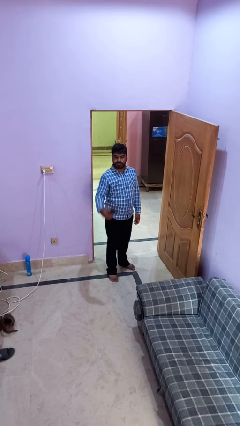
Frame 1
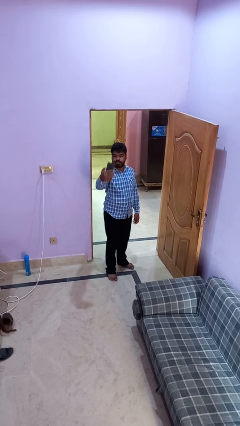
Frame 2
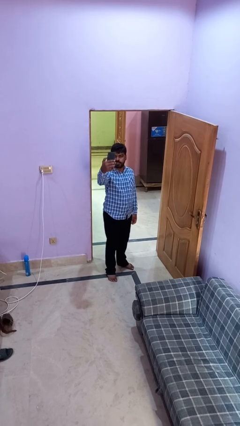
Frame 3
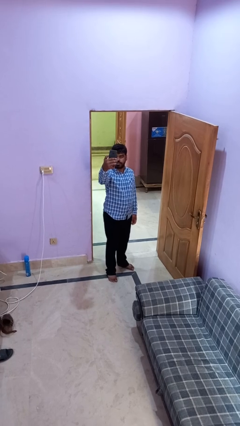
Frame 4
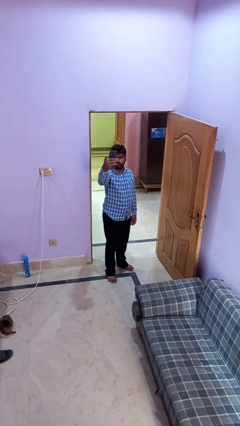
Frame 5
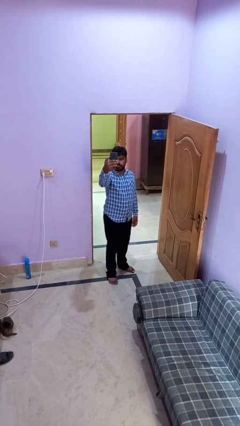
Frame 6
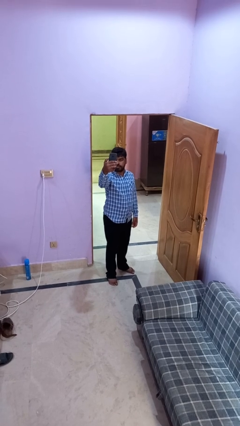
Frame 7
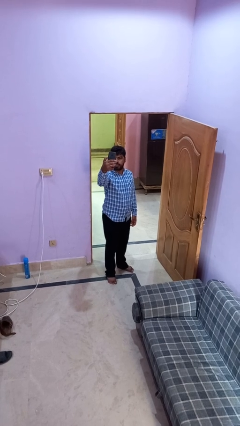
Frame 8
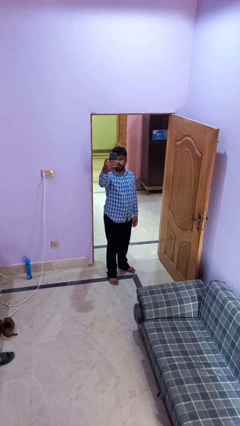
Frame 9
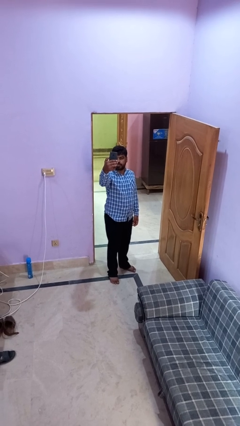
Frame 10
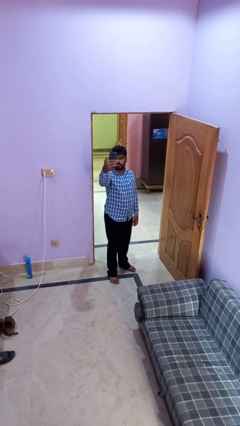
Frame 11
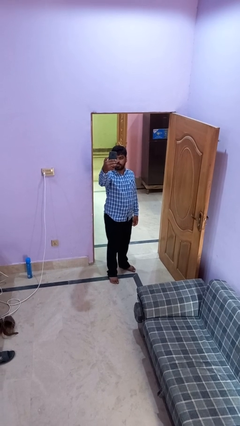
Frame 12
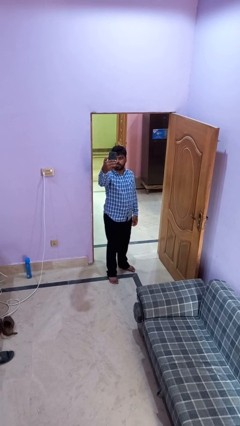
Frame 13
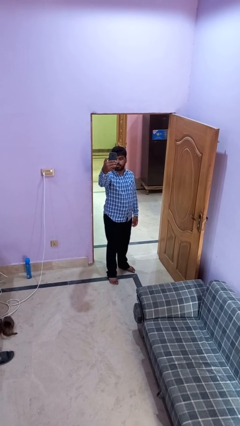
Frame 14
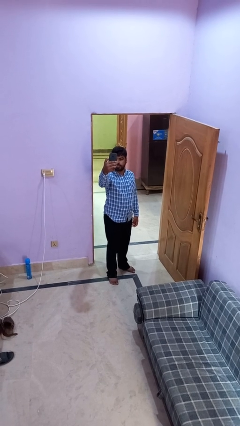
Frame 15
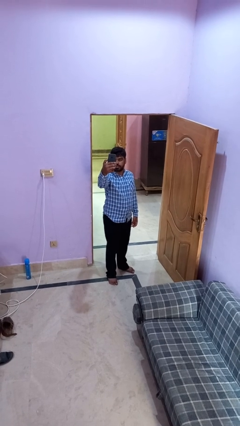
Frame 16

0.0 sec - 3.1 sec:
person takes selfie

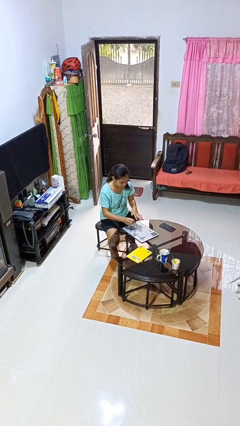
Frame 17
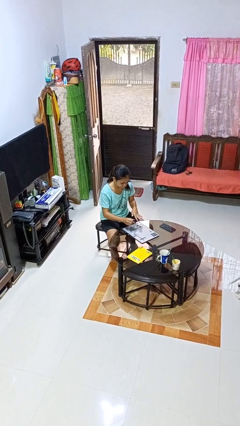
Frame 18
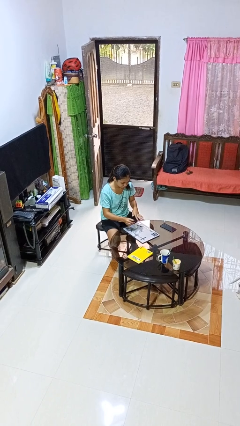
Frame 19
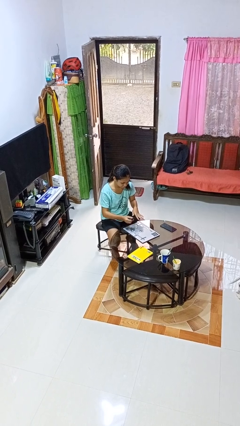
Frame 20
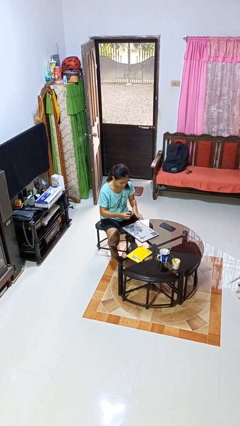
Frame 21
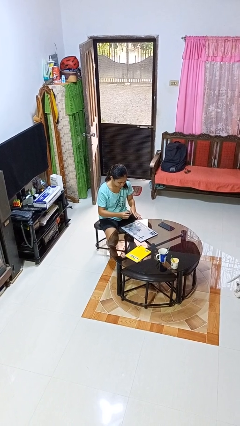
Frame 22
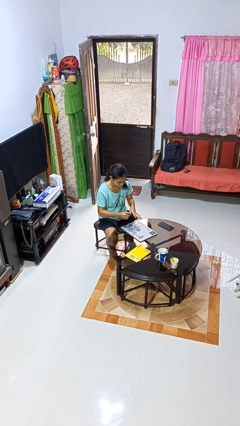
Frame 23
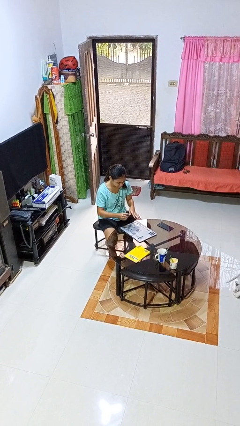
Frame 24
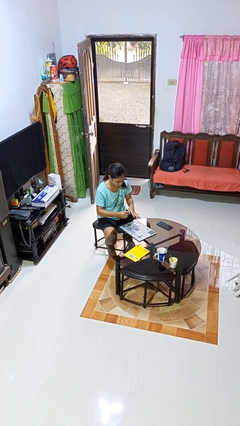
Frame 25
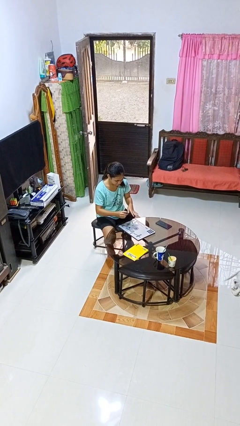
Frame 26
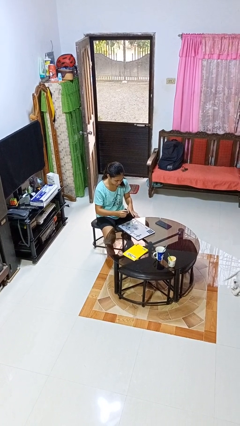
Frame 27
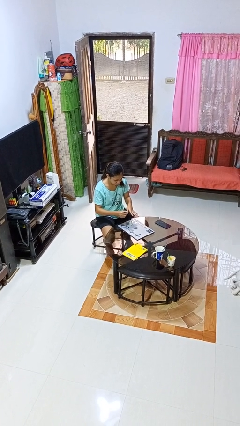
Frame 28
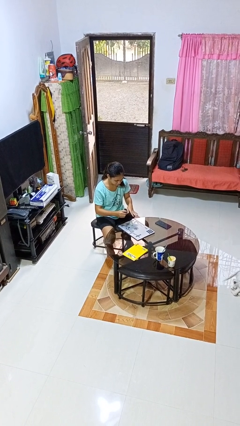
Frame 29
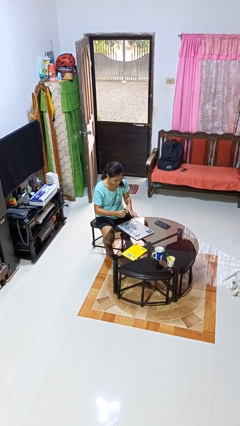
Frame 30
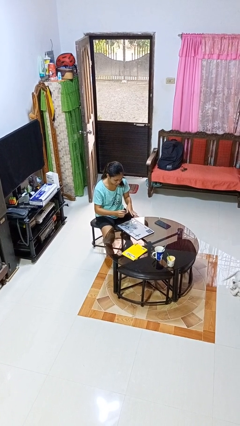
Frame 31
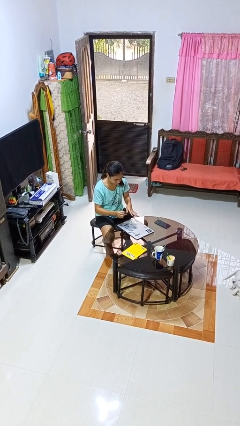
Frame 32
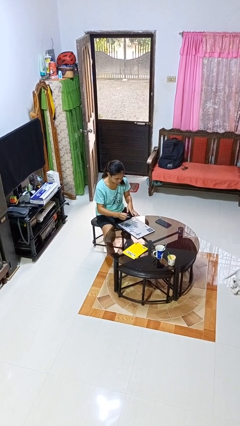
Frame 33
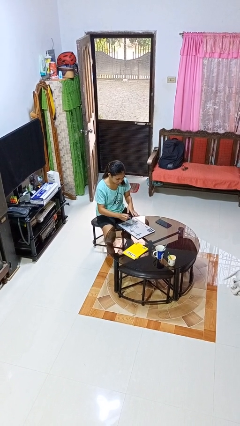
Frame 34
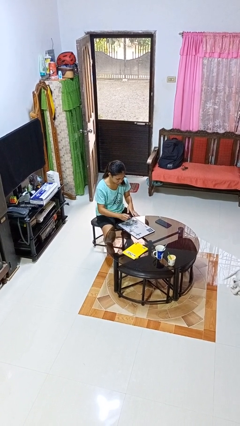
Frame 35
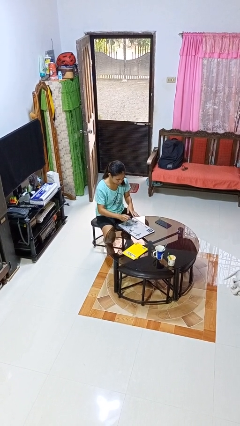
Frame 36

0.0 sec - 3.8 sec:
person paints fingernails

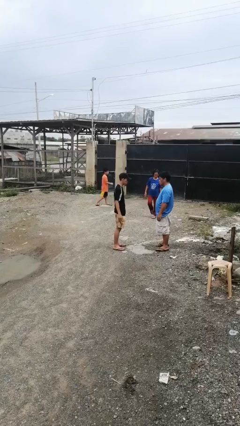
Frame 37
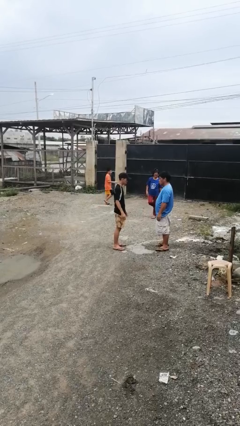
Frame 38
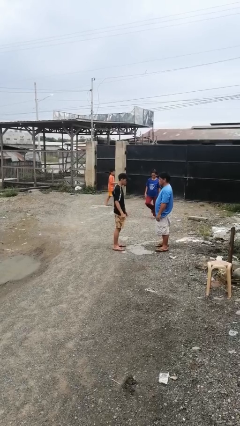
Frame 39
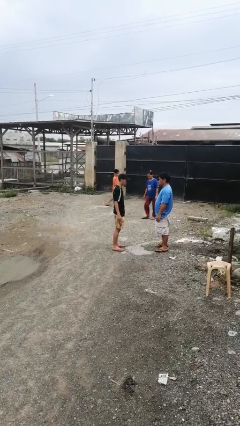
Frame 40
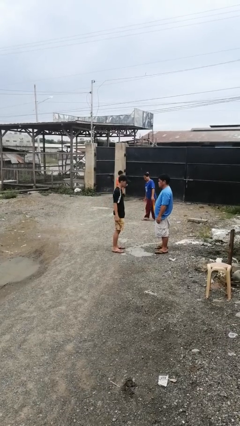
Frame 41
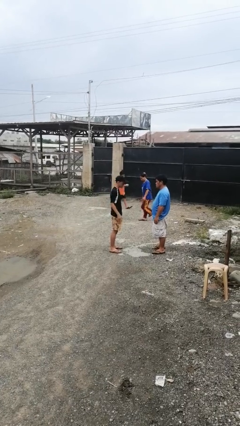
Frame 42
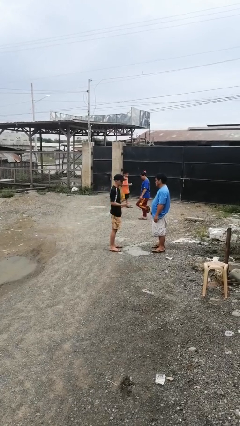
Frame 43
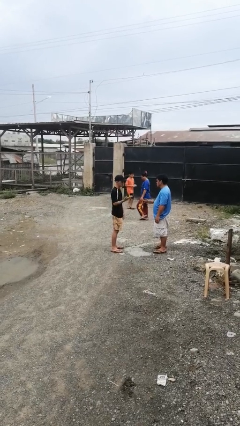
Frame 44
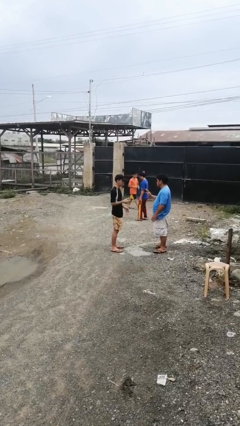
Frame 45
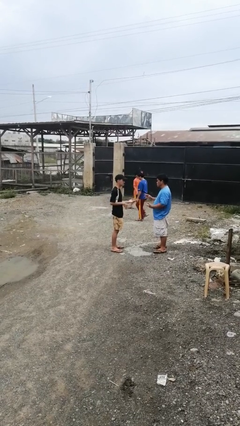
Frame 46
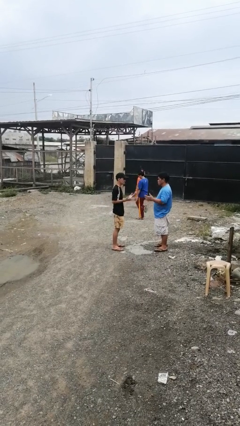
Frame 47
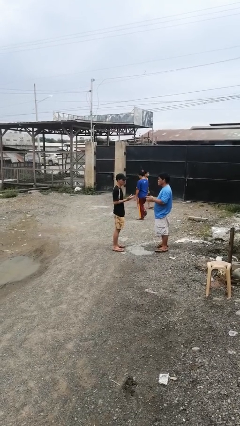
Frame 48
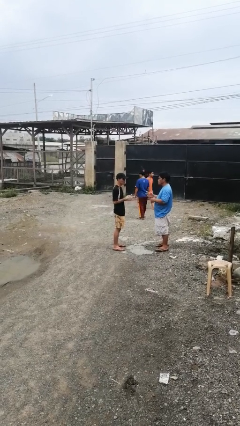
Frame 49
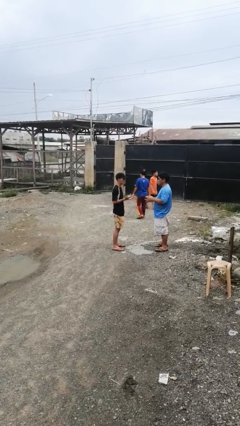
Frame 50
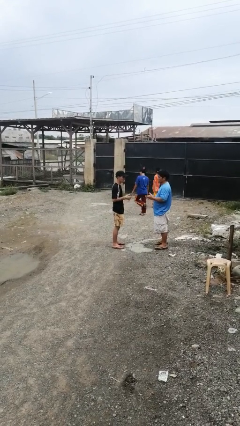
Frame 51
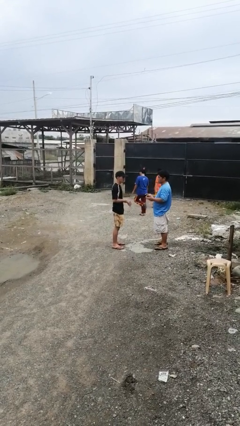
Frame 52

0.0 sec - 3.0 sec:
person talks to person

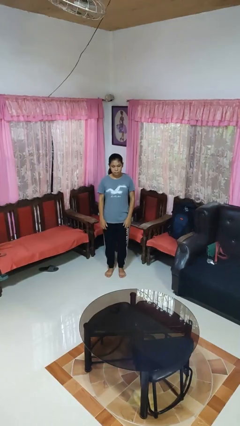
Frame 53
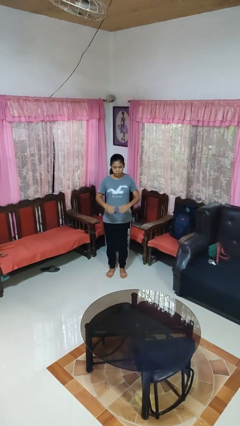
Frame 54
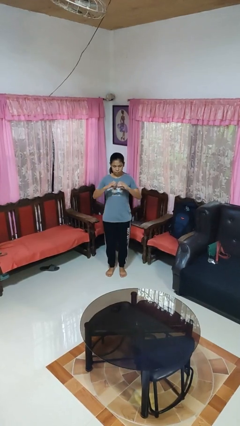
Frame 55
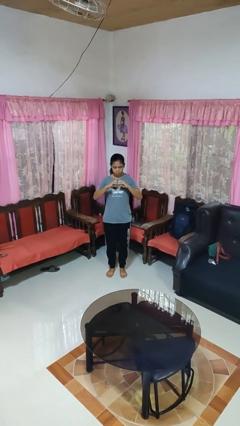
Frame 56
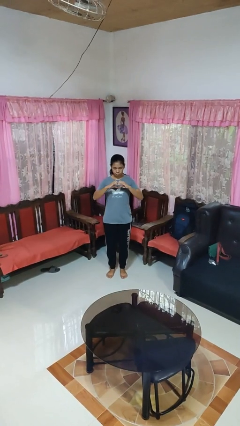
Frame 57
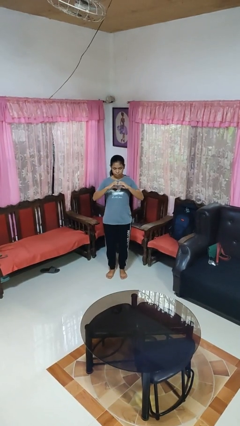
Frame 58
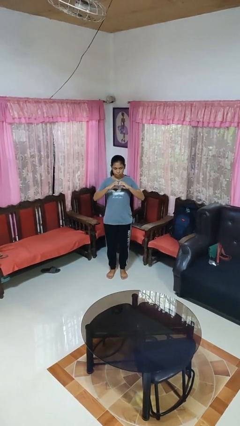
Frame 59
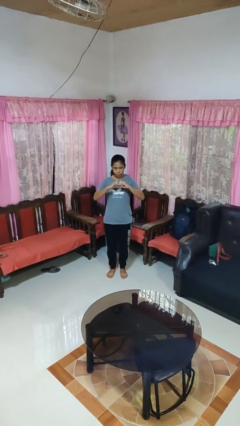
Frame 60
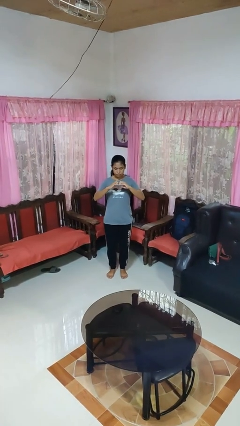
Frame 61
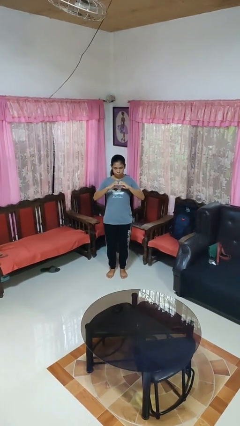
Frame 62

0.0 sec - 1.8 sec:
person gestures heart

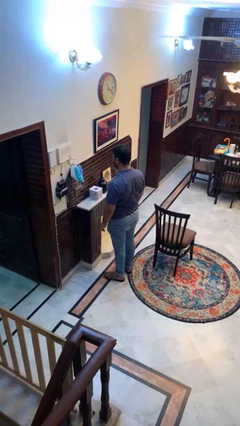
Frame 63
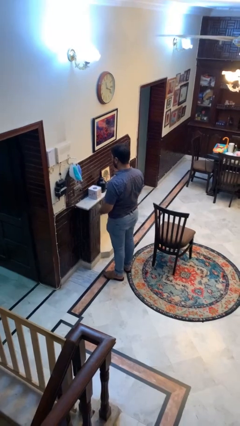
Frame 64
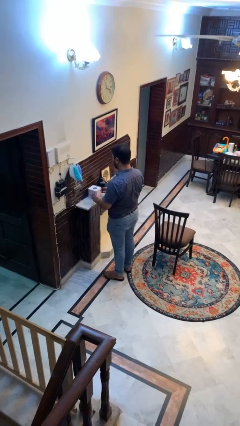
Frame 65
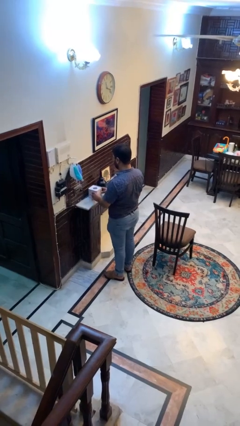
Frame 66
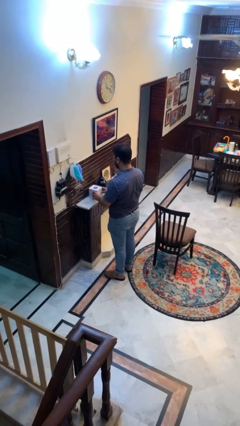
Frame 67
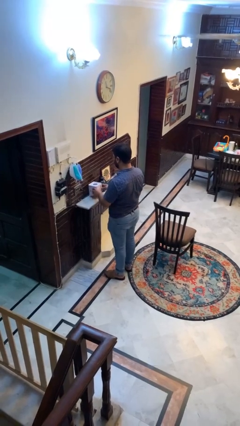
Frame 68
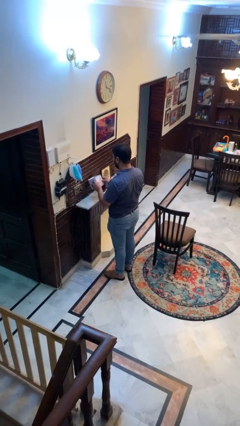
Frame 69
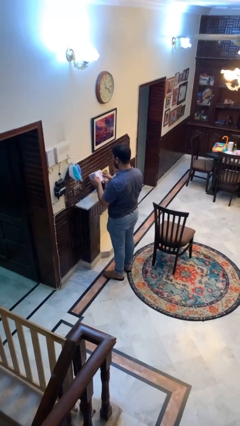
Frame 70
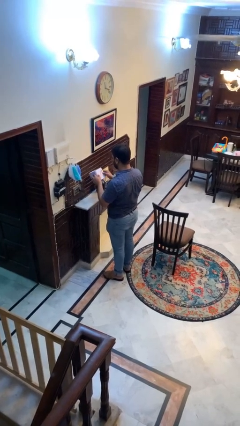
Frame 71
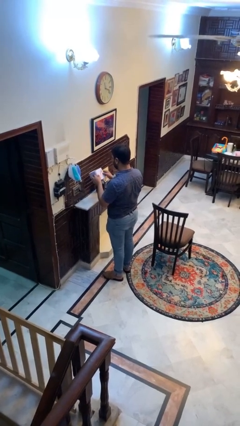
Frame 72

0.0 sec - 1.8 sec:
person picks up object from countertop

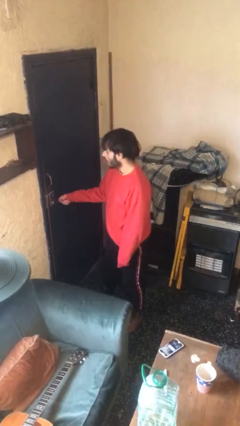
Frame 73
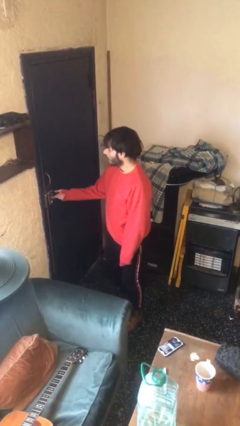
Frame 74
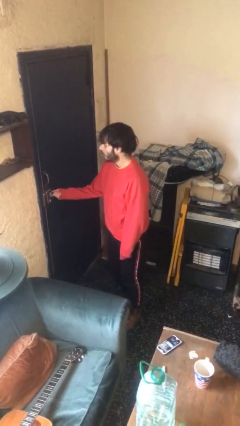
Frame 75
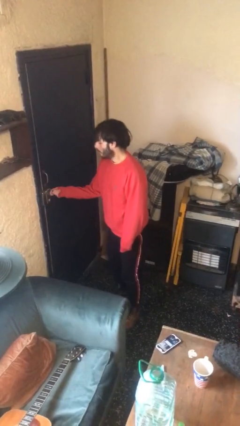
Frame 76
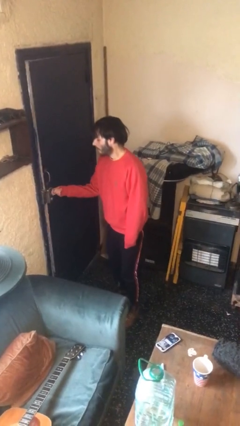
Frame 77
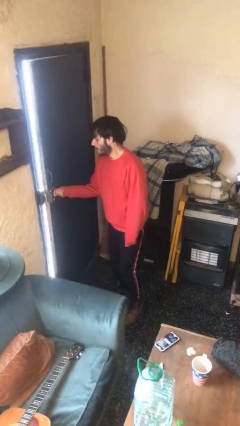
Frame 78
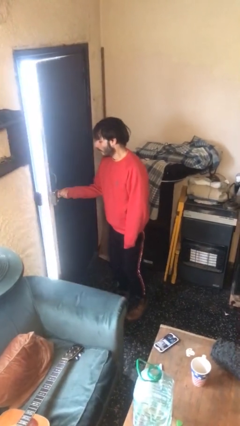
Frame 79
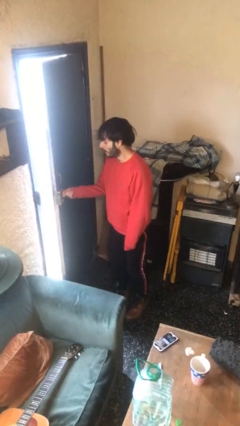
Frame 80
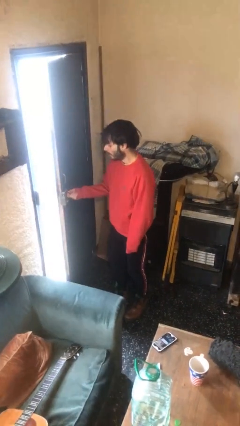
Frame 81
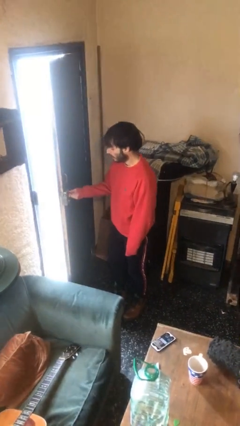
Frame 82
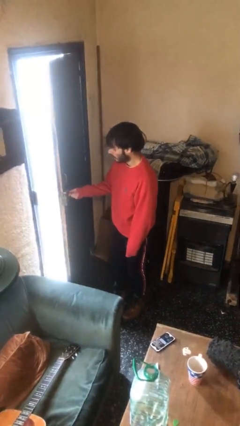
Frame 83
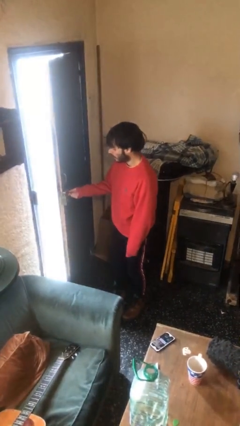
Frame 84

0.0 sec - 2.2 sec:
person opens facility door

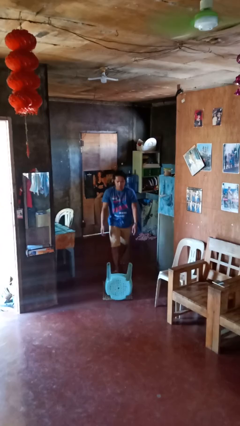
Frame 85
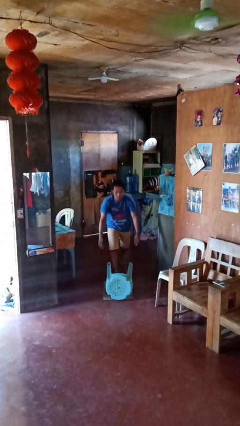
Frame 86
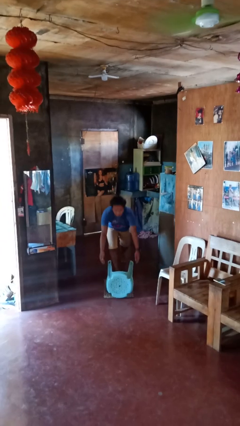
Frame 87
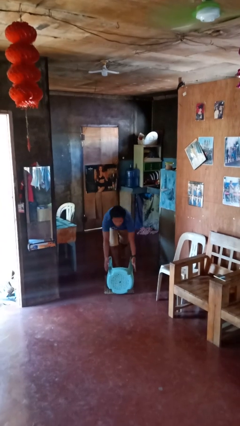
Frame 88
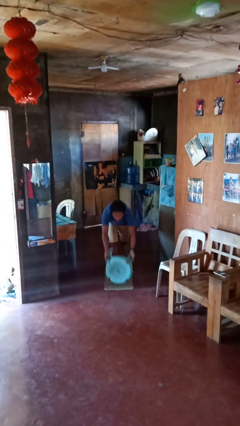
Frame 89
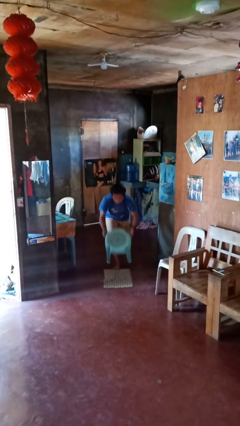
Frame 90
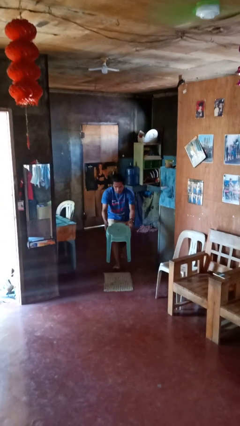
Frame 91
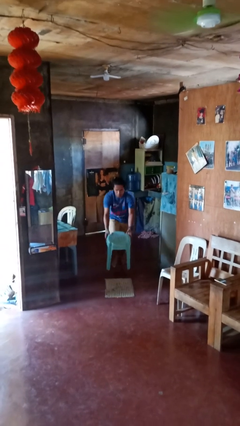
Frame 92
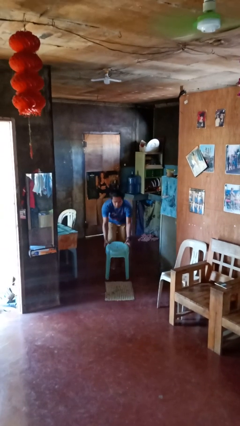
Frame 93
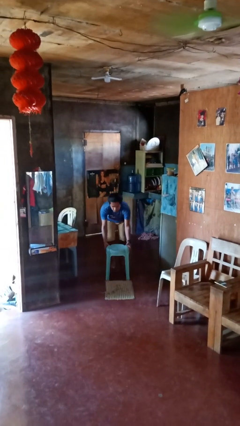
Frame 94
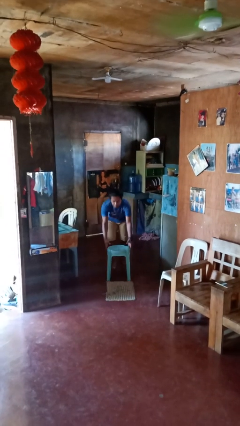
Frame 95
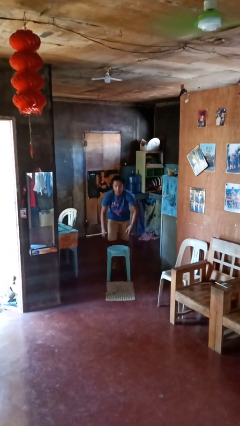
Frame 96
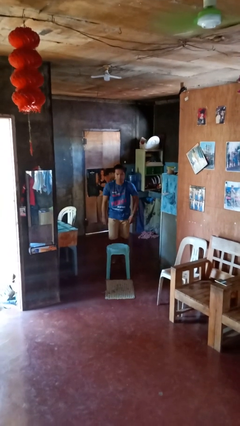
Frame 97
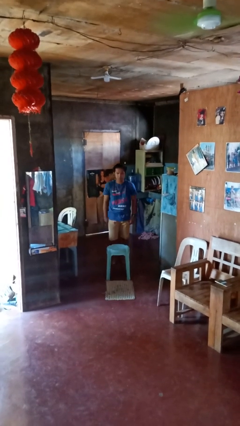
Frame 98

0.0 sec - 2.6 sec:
person sets upright furniture
